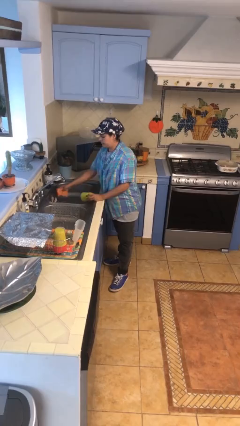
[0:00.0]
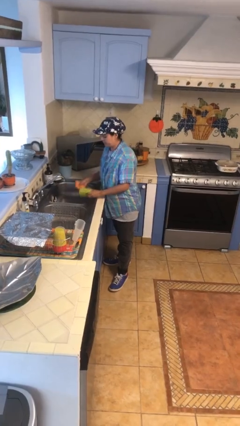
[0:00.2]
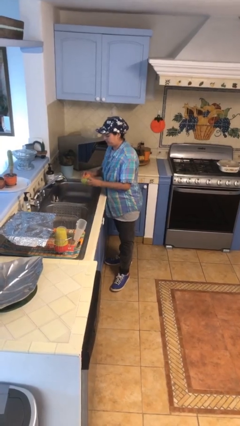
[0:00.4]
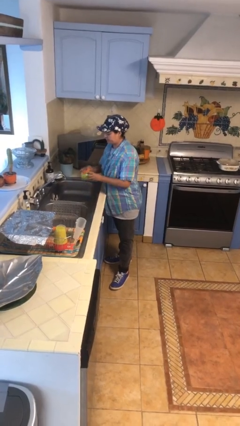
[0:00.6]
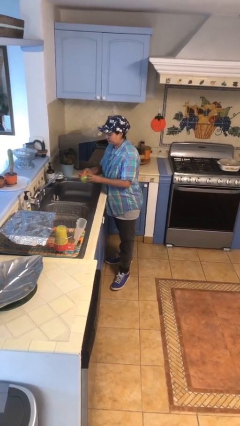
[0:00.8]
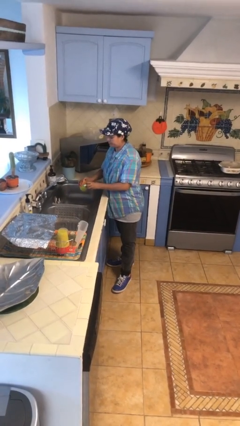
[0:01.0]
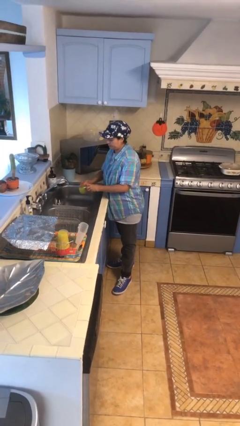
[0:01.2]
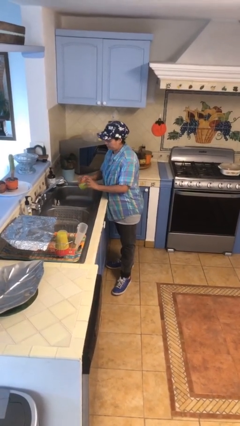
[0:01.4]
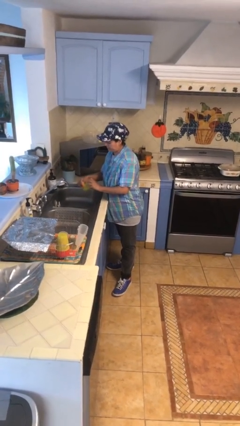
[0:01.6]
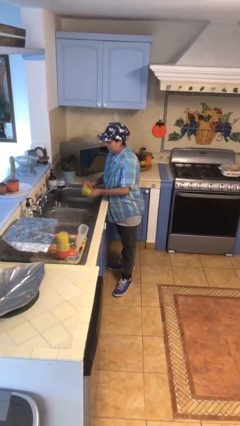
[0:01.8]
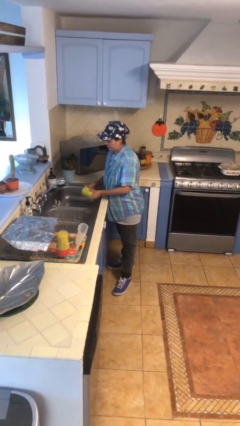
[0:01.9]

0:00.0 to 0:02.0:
person washes dish

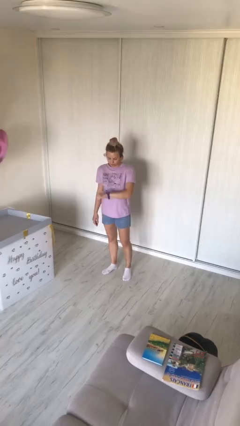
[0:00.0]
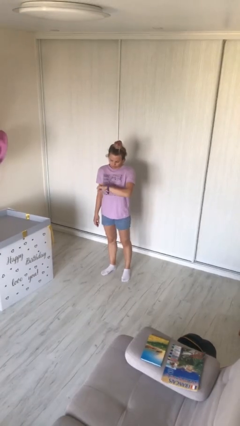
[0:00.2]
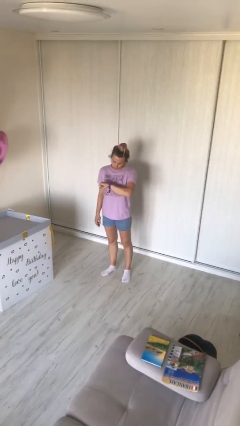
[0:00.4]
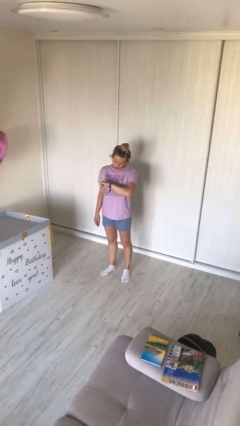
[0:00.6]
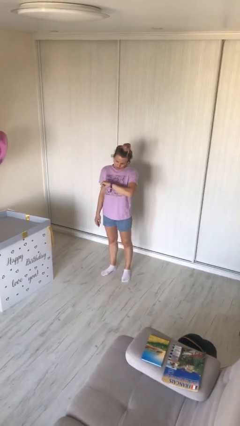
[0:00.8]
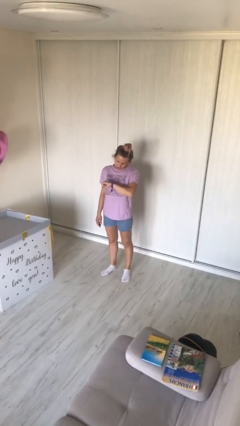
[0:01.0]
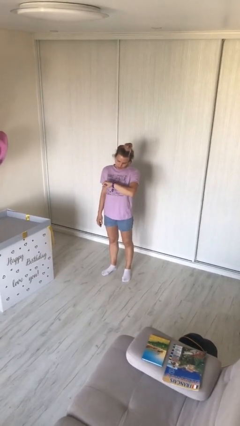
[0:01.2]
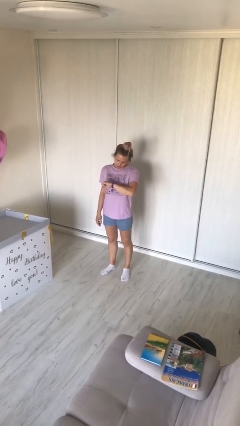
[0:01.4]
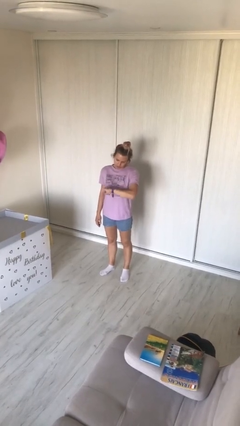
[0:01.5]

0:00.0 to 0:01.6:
person looks at wristwatch

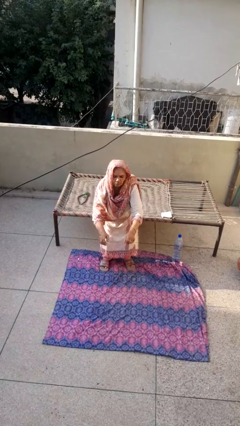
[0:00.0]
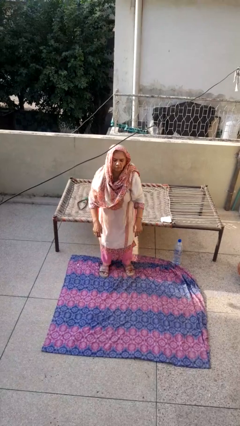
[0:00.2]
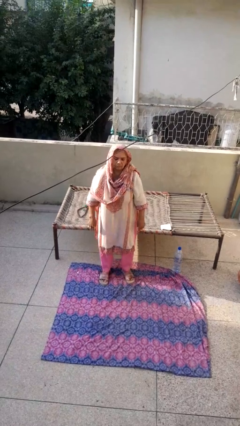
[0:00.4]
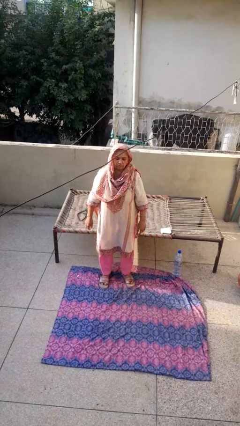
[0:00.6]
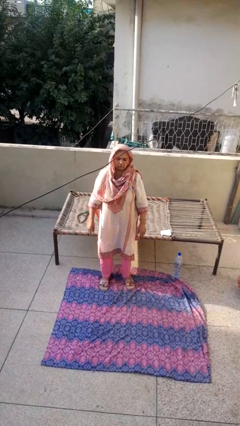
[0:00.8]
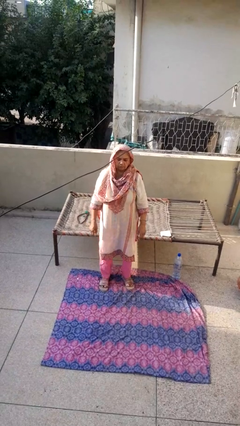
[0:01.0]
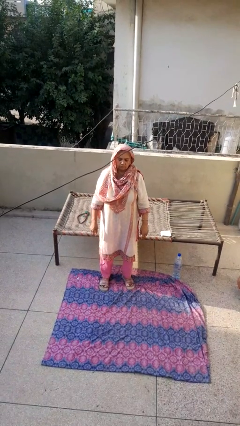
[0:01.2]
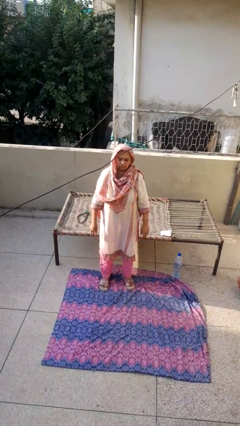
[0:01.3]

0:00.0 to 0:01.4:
person stands up

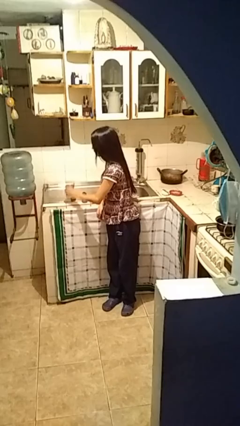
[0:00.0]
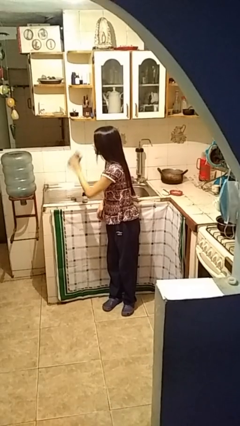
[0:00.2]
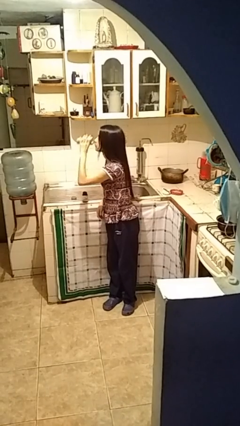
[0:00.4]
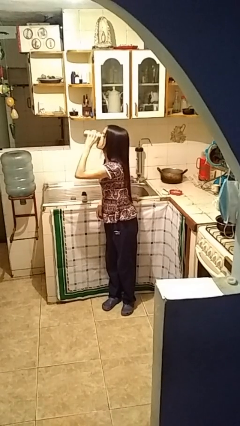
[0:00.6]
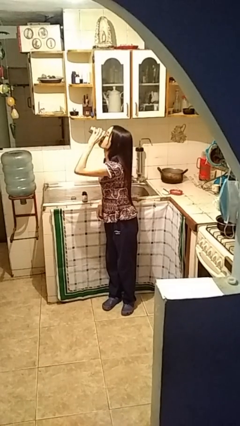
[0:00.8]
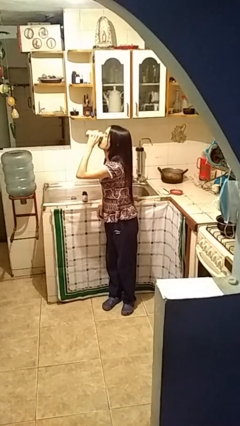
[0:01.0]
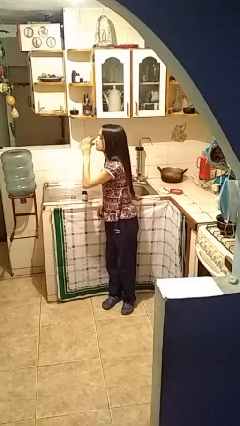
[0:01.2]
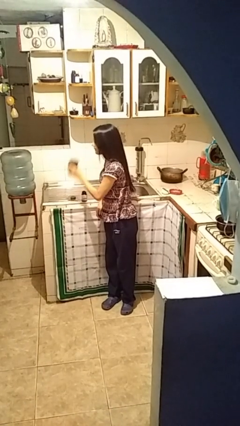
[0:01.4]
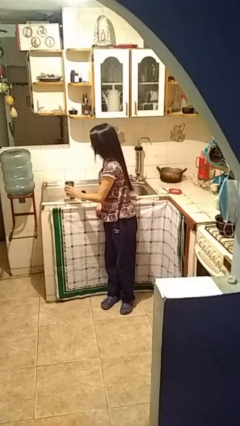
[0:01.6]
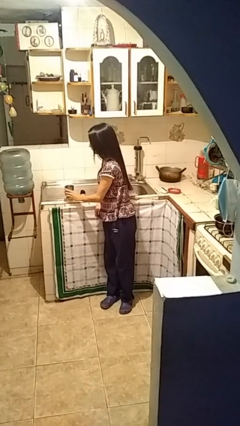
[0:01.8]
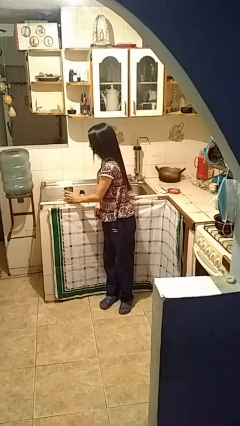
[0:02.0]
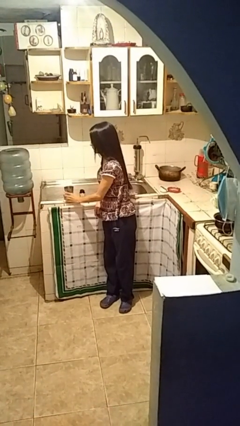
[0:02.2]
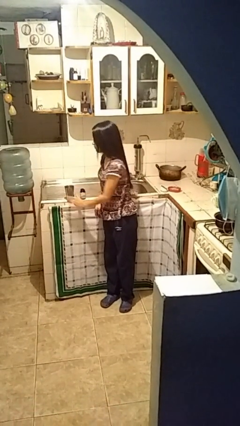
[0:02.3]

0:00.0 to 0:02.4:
person drinks from cup

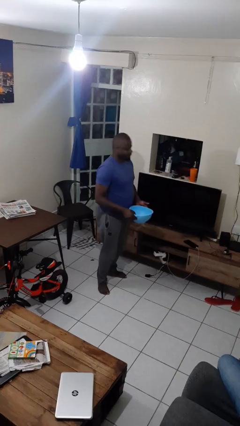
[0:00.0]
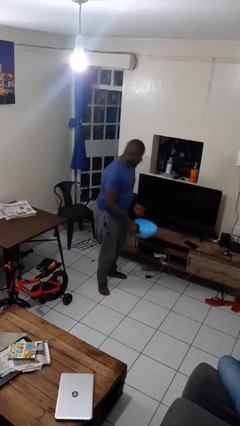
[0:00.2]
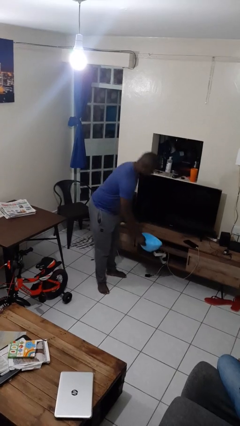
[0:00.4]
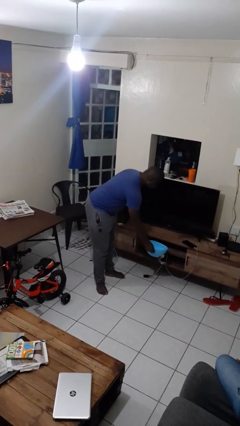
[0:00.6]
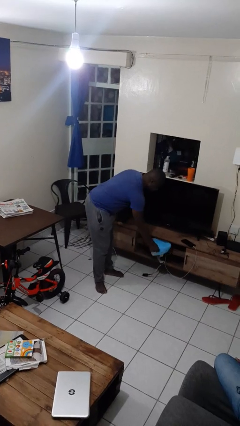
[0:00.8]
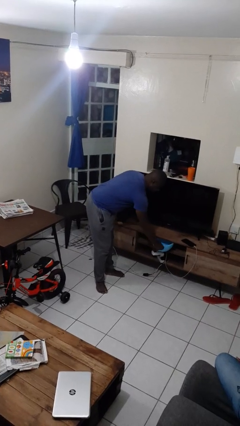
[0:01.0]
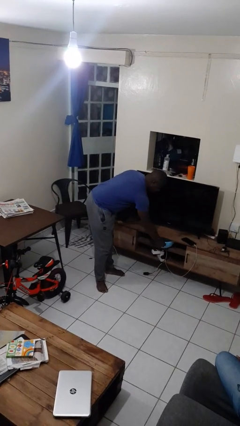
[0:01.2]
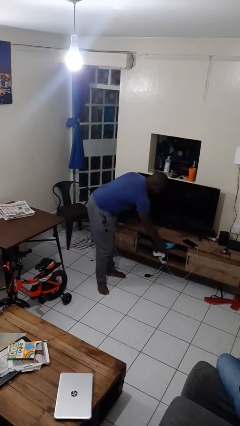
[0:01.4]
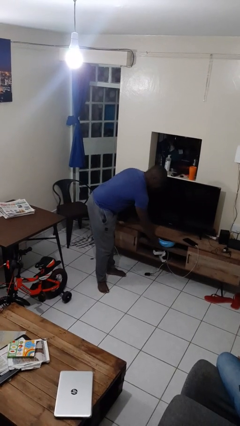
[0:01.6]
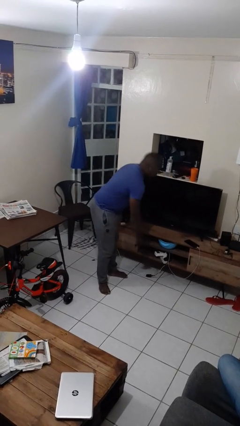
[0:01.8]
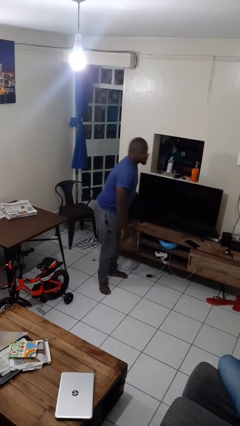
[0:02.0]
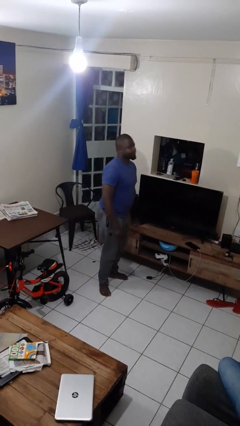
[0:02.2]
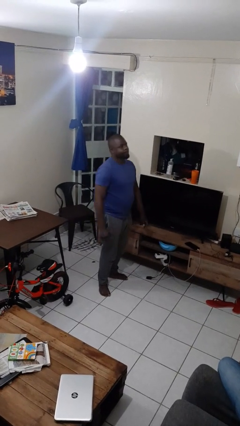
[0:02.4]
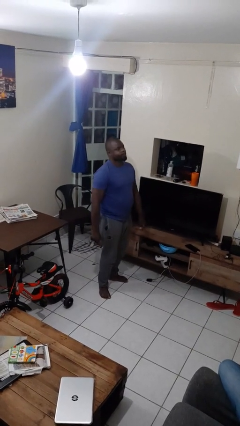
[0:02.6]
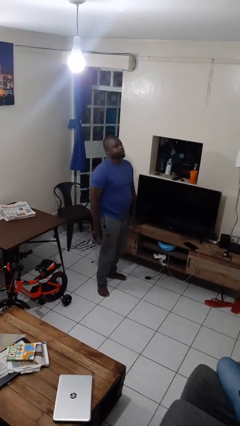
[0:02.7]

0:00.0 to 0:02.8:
person puts down object into cabinet

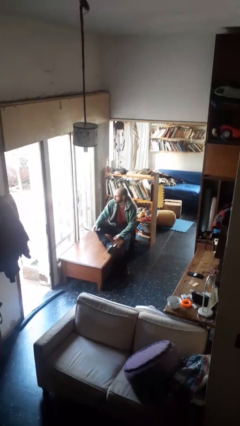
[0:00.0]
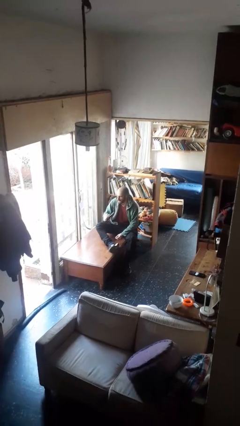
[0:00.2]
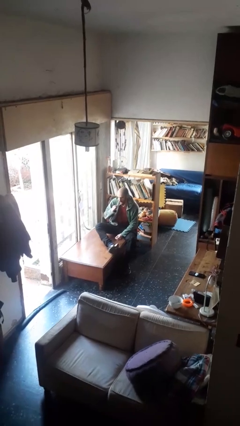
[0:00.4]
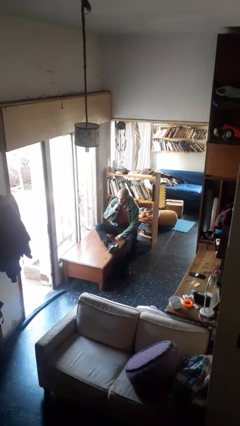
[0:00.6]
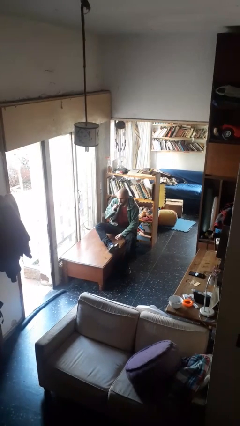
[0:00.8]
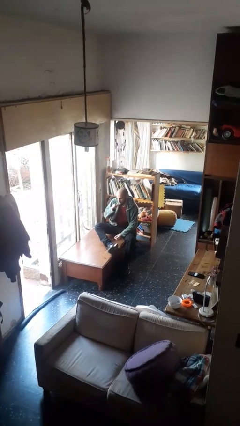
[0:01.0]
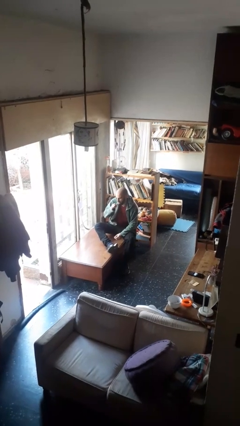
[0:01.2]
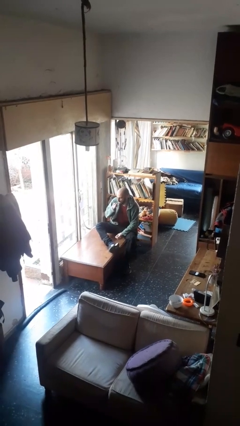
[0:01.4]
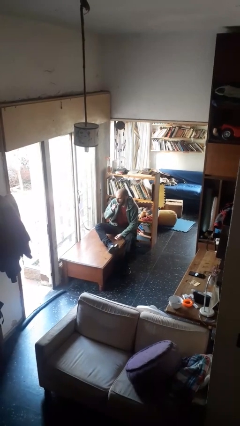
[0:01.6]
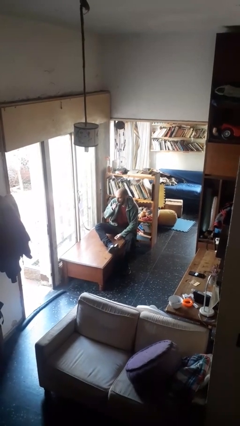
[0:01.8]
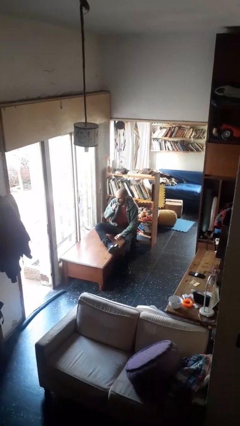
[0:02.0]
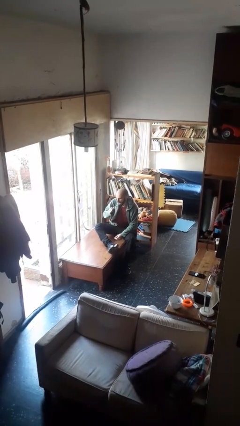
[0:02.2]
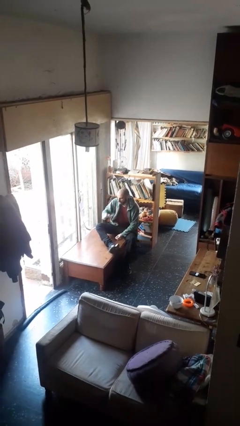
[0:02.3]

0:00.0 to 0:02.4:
person brushes teeth

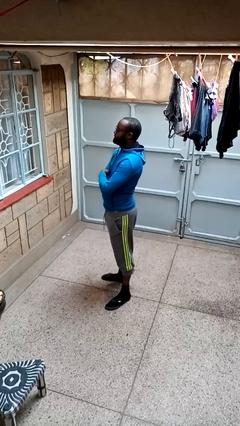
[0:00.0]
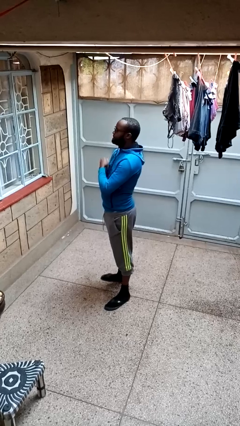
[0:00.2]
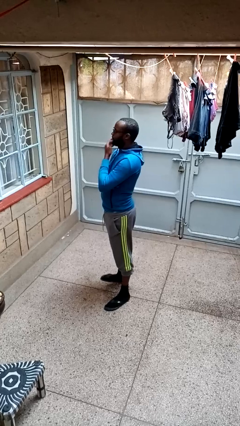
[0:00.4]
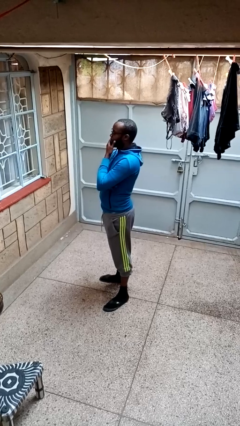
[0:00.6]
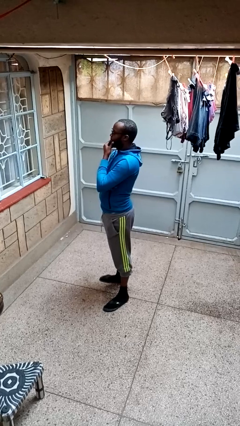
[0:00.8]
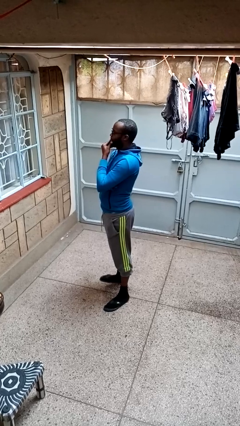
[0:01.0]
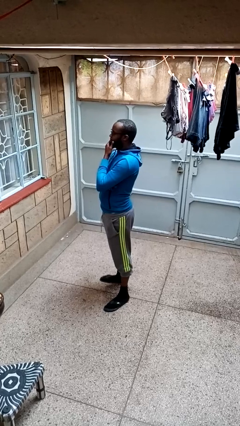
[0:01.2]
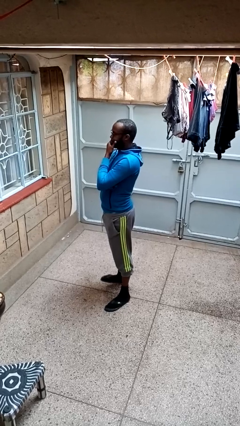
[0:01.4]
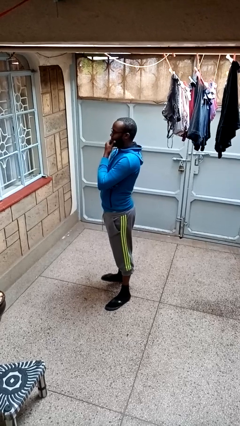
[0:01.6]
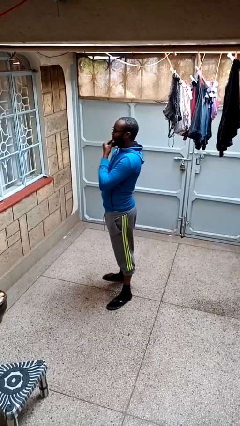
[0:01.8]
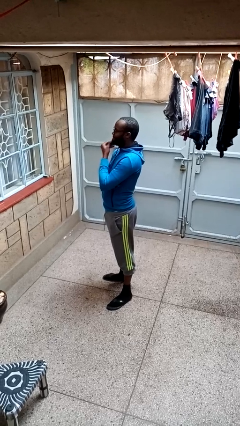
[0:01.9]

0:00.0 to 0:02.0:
person strokes chin

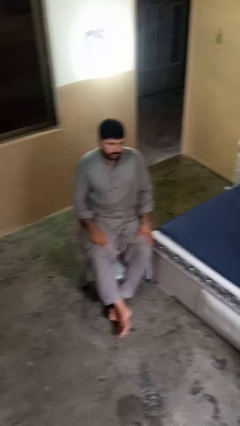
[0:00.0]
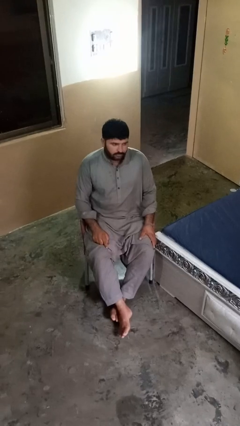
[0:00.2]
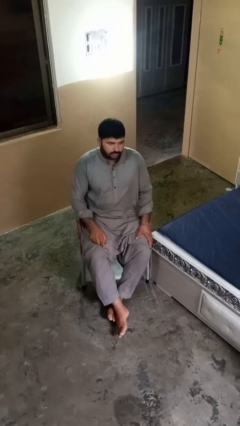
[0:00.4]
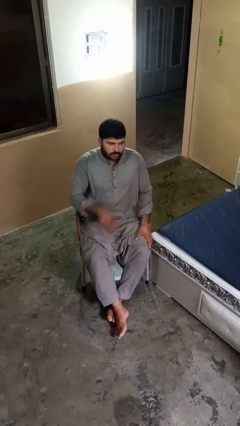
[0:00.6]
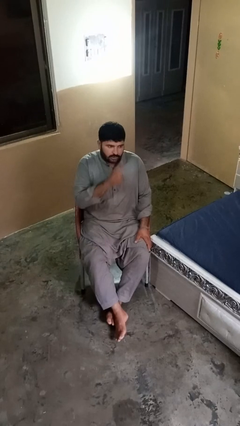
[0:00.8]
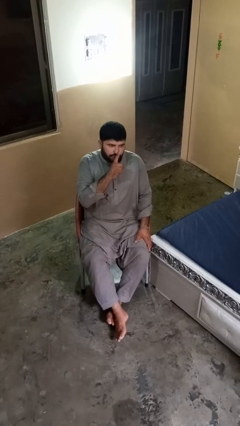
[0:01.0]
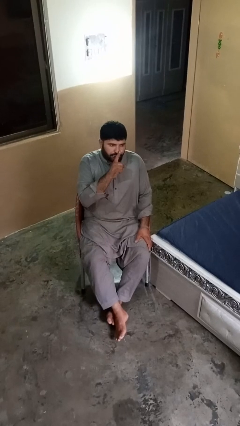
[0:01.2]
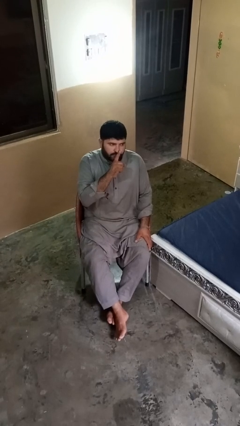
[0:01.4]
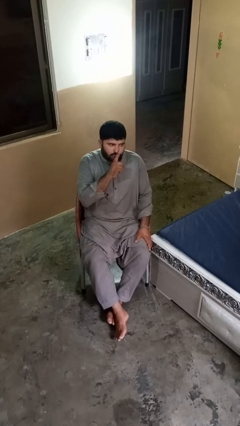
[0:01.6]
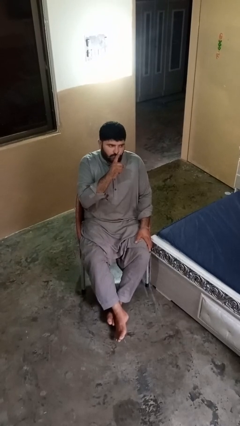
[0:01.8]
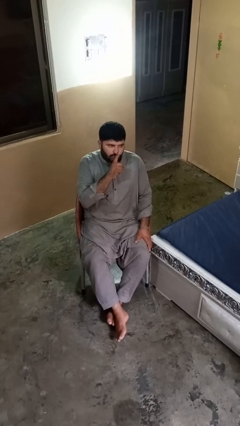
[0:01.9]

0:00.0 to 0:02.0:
person gestures be quiet

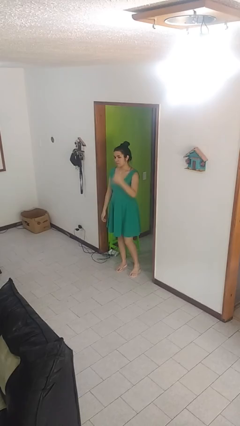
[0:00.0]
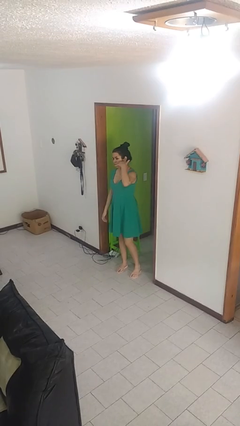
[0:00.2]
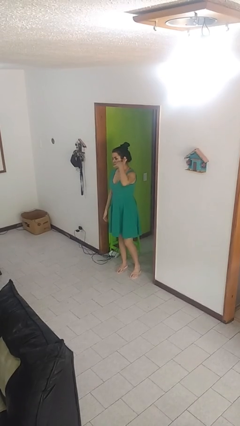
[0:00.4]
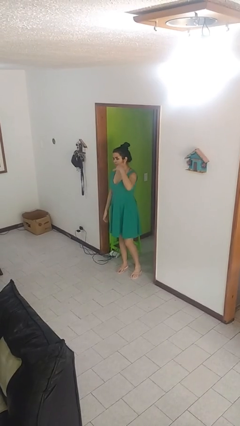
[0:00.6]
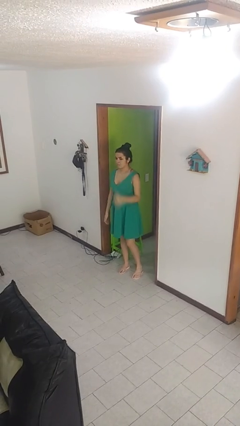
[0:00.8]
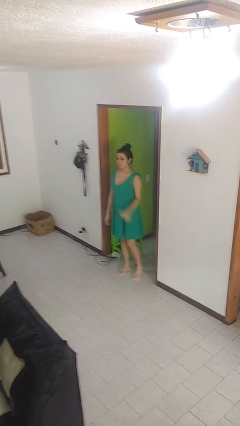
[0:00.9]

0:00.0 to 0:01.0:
person gestures call me
